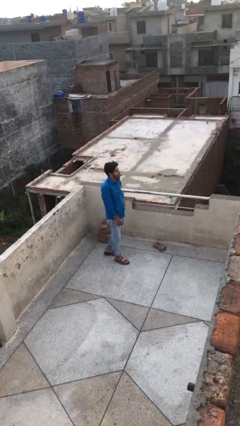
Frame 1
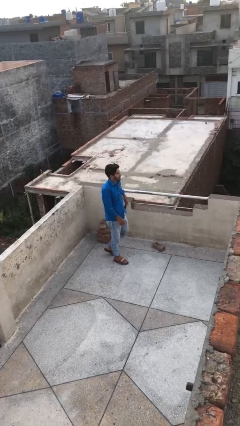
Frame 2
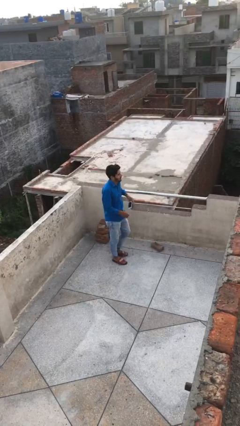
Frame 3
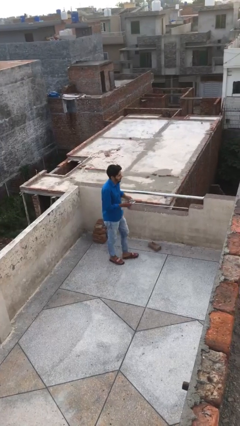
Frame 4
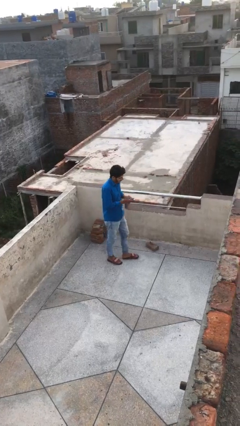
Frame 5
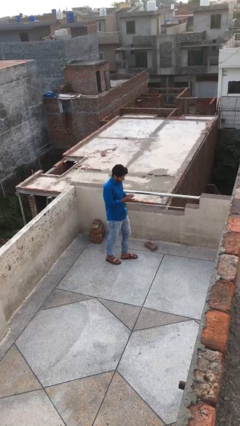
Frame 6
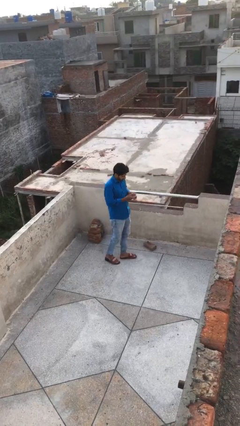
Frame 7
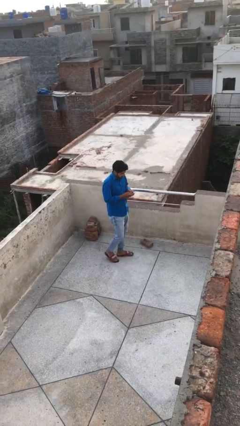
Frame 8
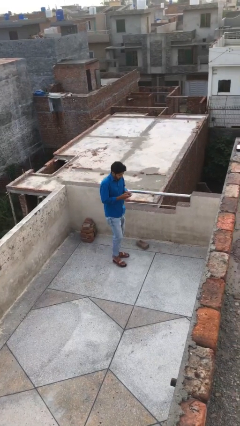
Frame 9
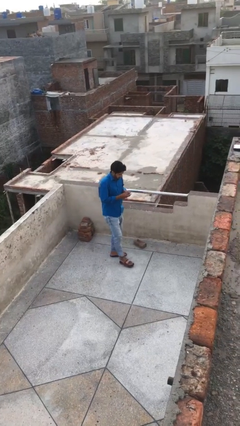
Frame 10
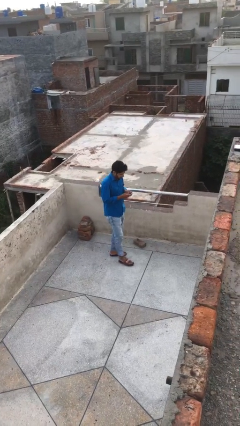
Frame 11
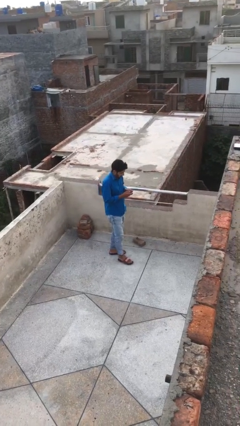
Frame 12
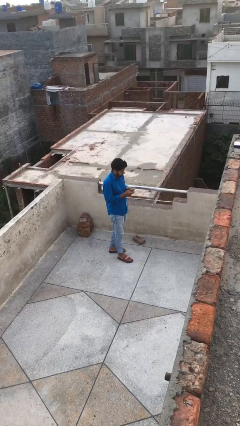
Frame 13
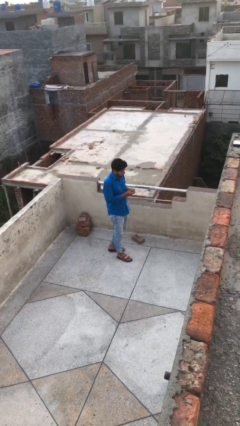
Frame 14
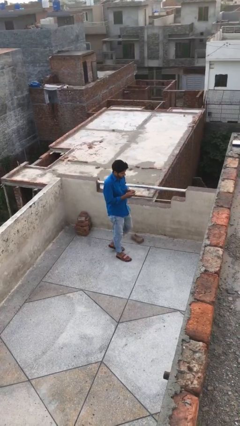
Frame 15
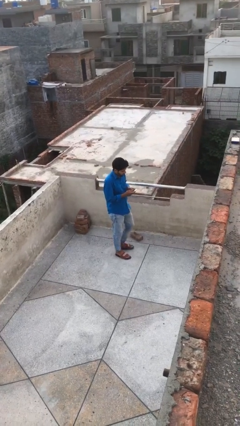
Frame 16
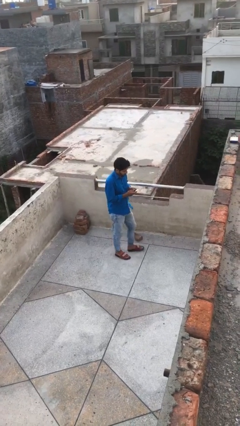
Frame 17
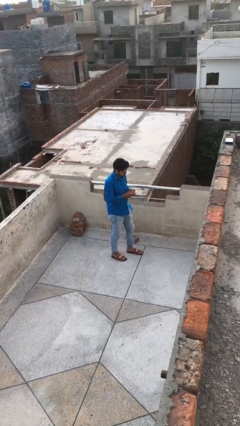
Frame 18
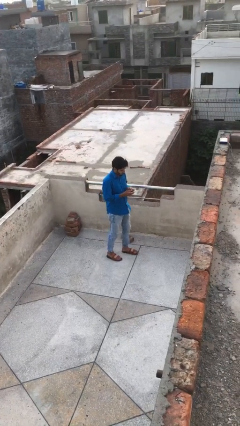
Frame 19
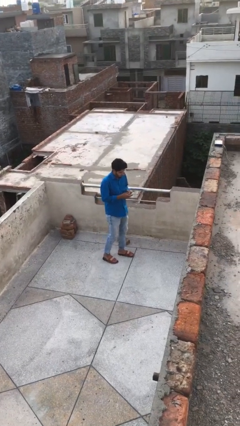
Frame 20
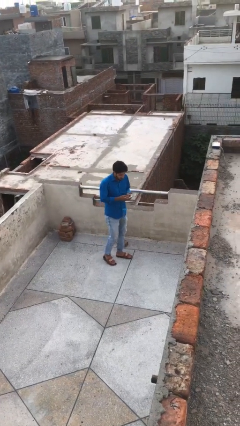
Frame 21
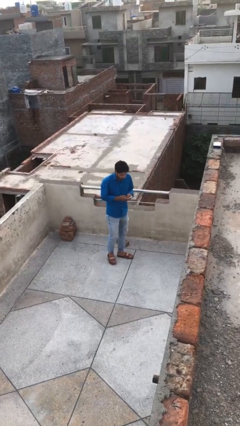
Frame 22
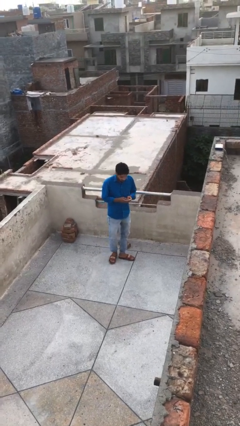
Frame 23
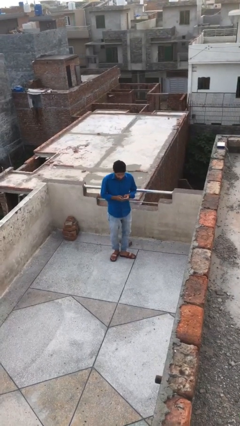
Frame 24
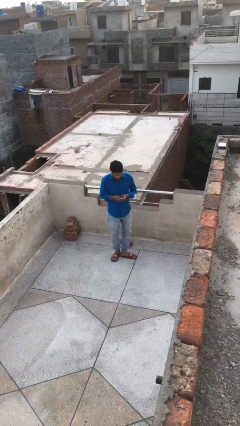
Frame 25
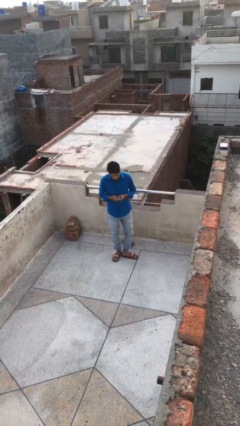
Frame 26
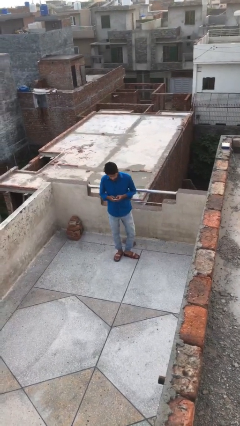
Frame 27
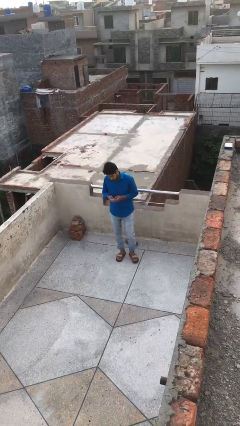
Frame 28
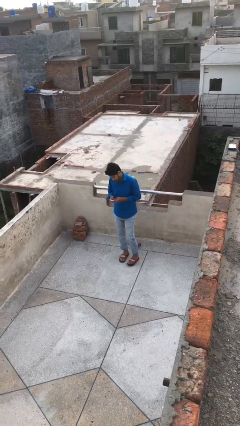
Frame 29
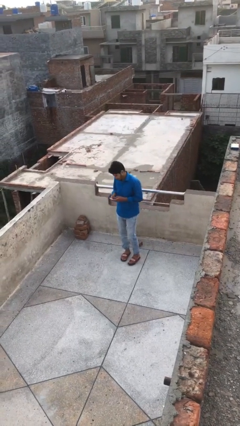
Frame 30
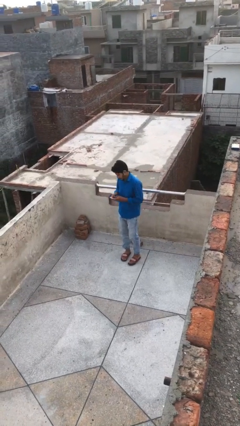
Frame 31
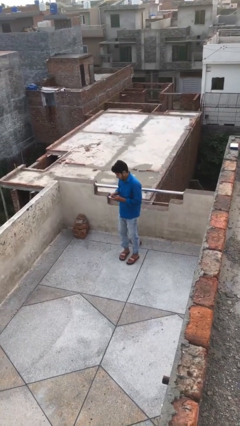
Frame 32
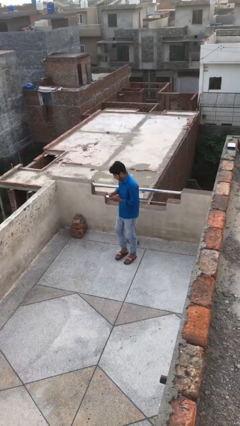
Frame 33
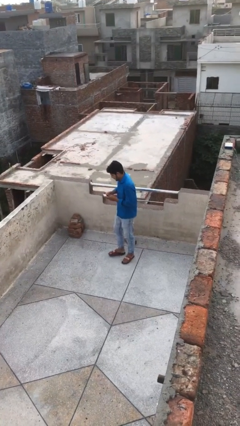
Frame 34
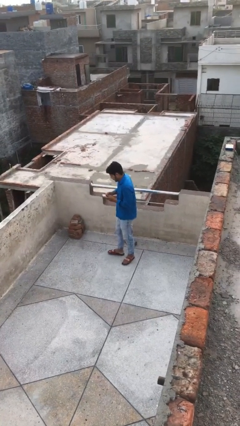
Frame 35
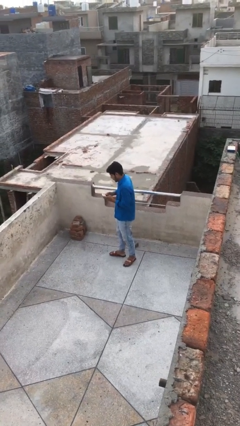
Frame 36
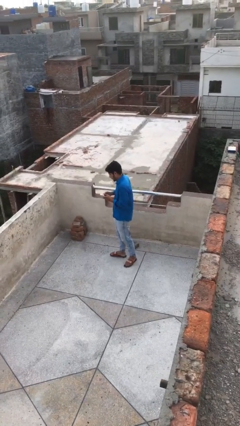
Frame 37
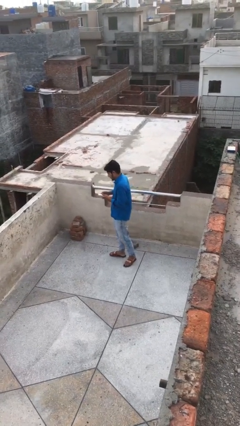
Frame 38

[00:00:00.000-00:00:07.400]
person texts on phone

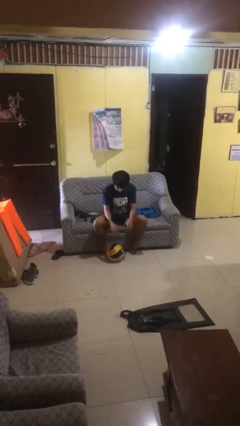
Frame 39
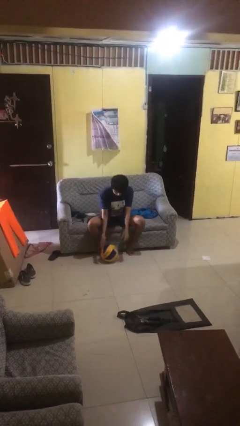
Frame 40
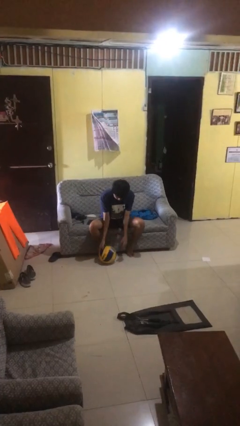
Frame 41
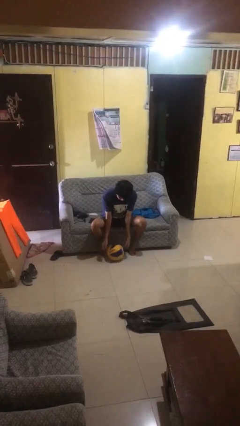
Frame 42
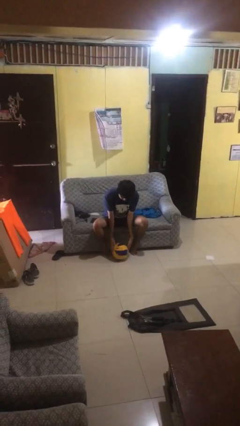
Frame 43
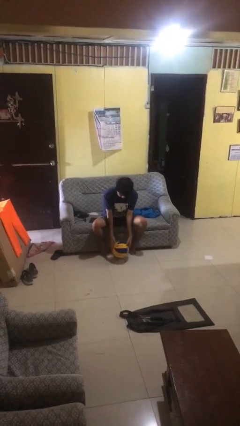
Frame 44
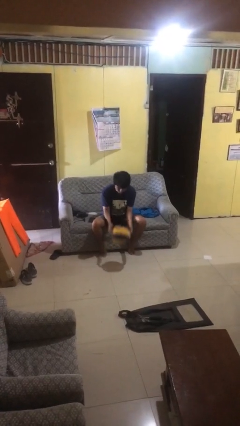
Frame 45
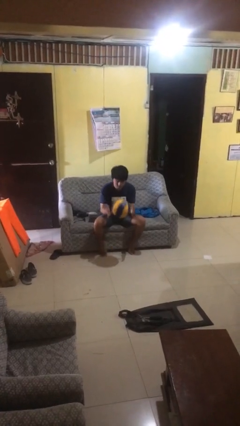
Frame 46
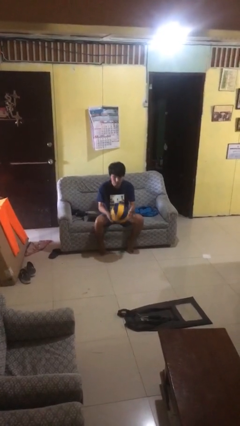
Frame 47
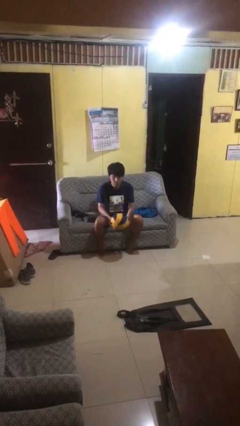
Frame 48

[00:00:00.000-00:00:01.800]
person picks up object from floor

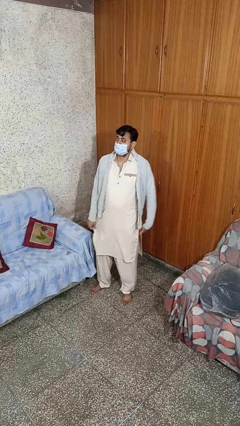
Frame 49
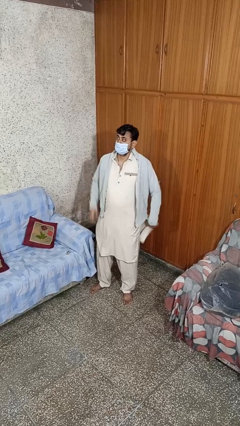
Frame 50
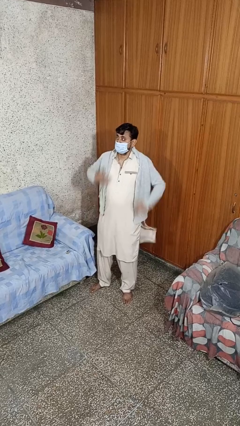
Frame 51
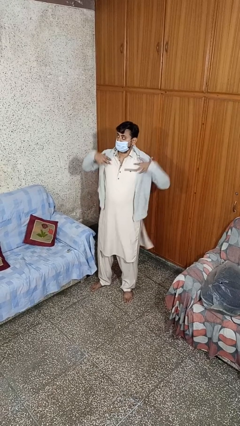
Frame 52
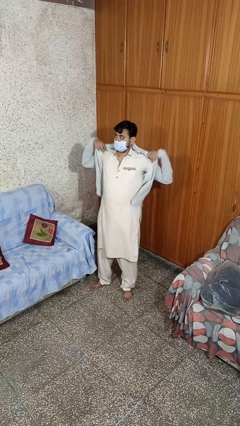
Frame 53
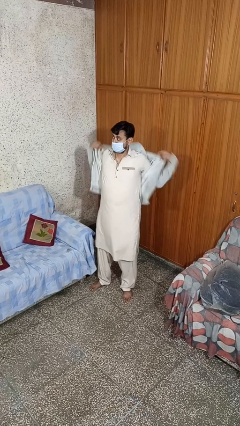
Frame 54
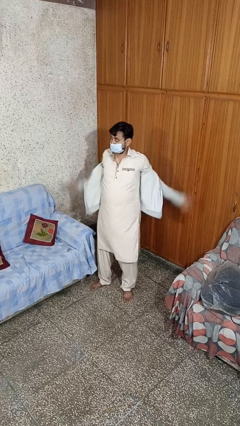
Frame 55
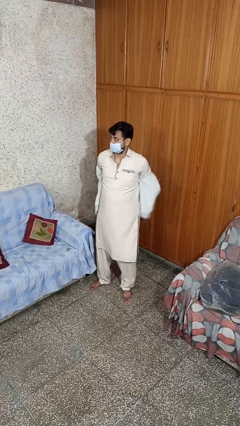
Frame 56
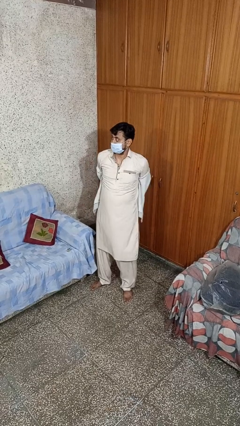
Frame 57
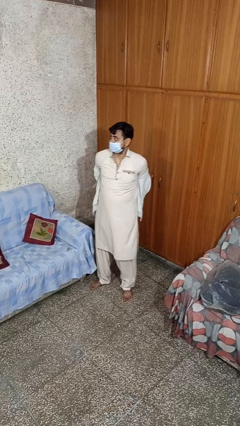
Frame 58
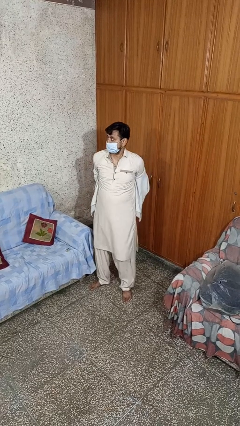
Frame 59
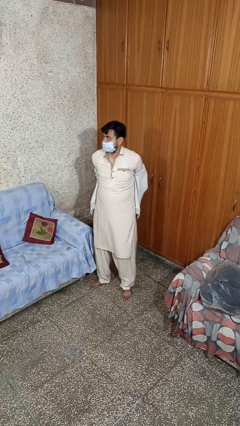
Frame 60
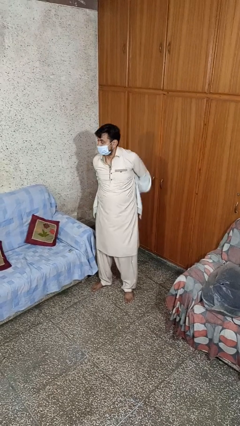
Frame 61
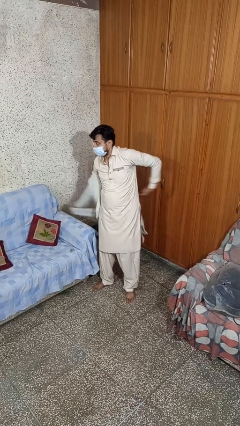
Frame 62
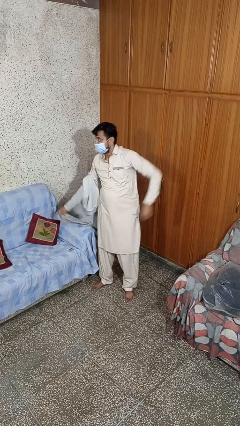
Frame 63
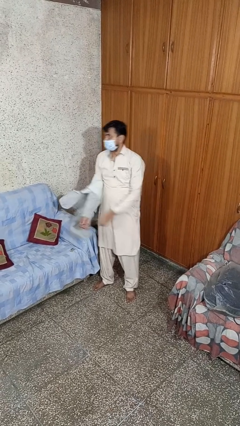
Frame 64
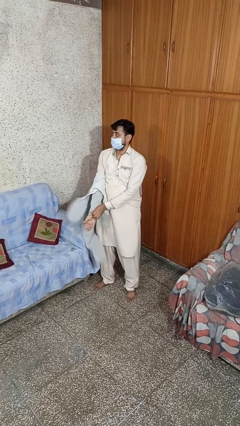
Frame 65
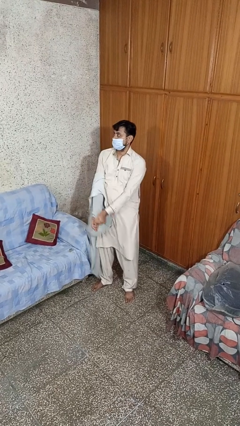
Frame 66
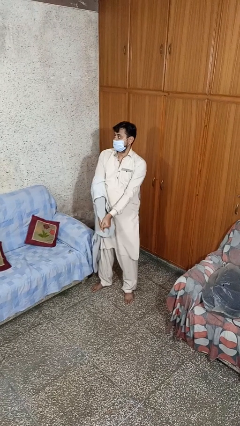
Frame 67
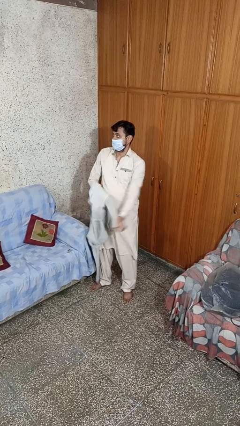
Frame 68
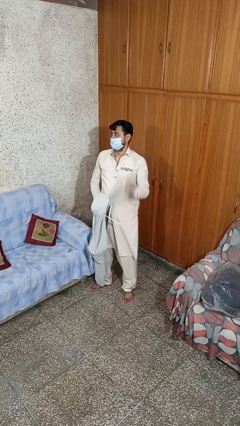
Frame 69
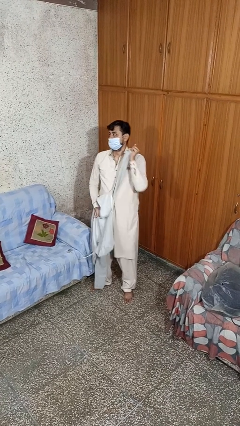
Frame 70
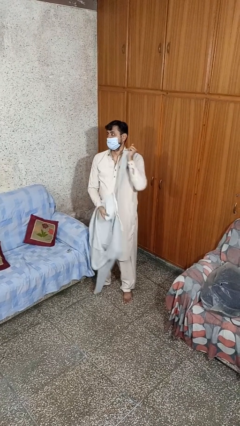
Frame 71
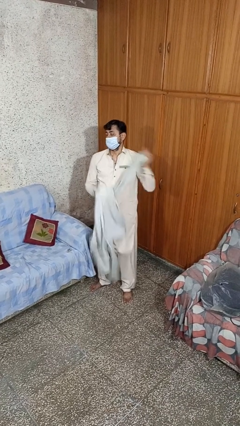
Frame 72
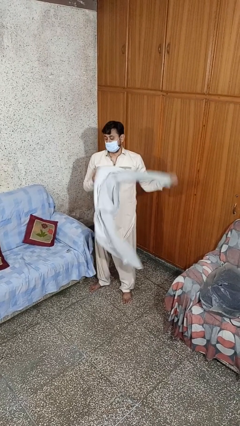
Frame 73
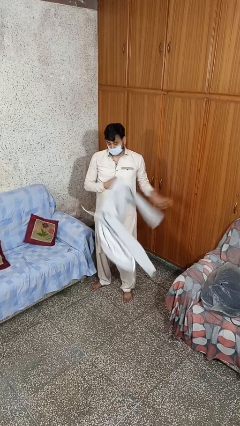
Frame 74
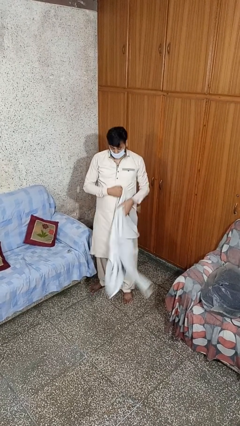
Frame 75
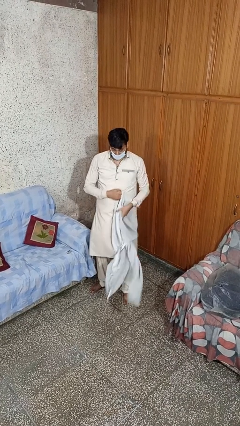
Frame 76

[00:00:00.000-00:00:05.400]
person takes off jacket

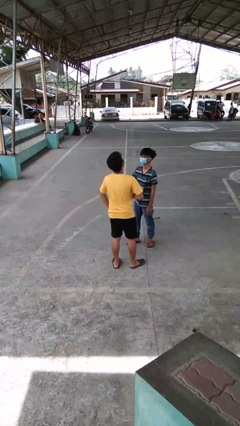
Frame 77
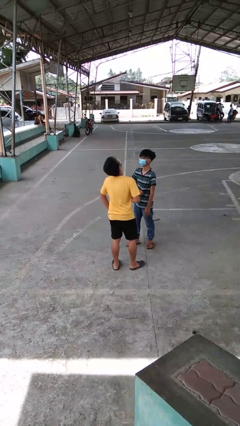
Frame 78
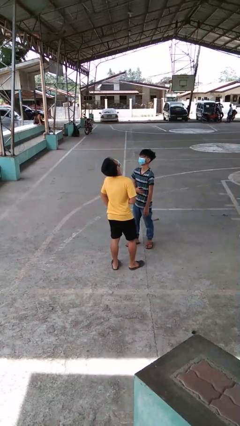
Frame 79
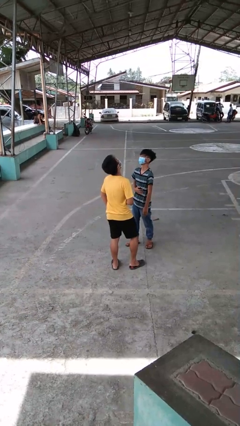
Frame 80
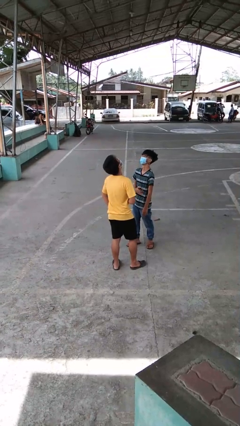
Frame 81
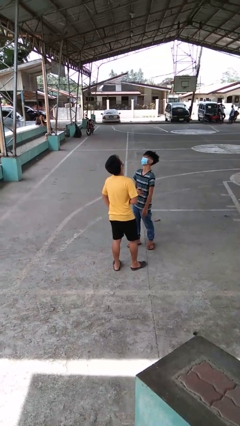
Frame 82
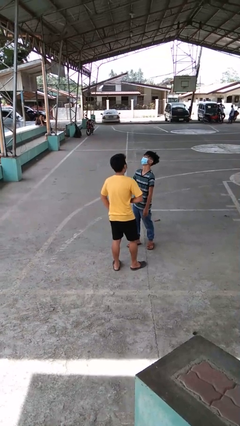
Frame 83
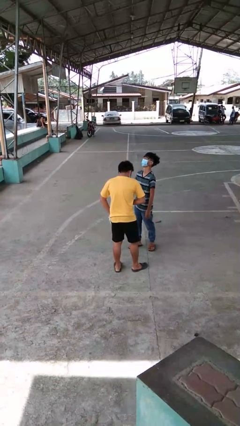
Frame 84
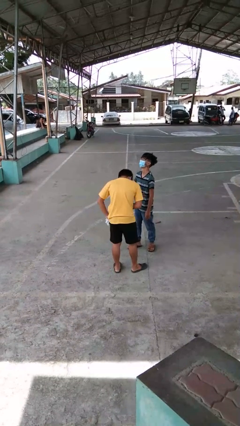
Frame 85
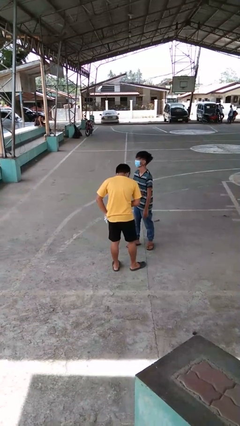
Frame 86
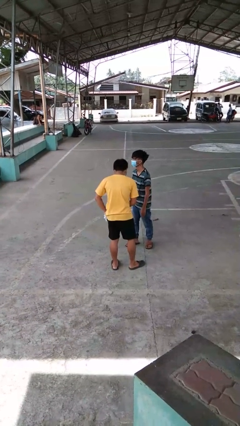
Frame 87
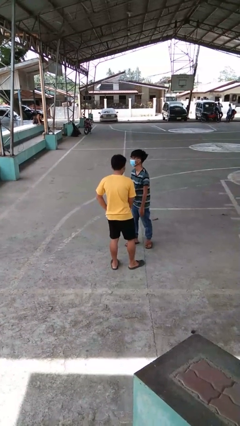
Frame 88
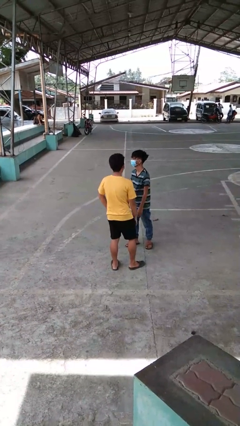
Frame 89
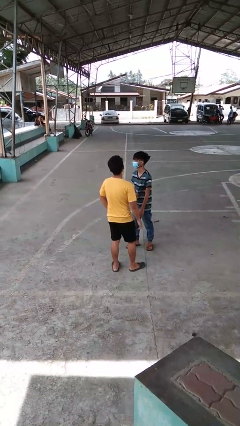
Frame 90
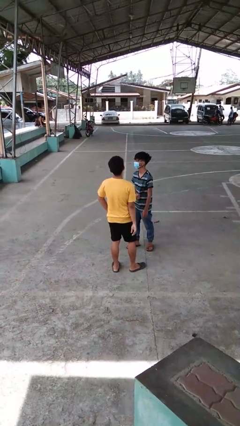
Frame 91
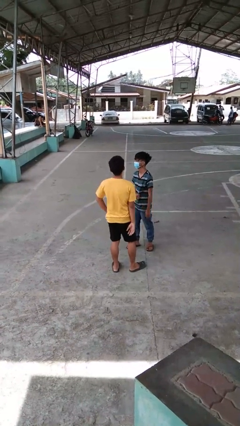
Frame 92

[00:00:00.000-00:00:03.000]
person laughs with person
